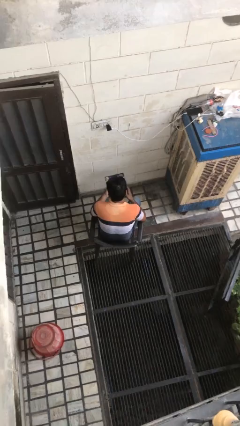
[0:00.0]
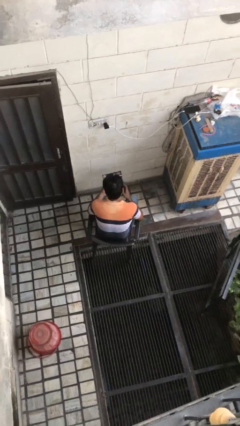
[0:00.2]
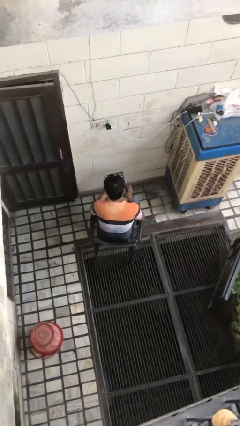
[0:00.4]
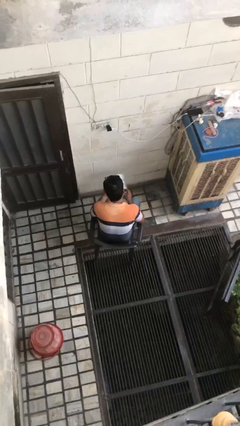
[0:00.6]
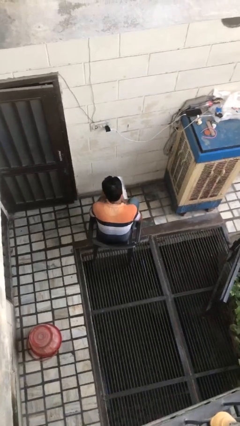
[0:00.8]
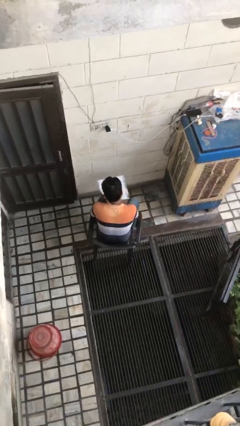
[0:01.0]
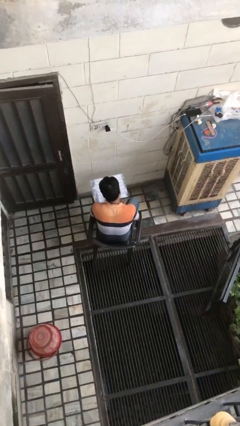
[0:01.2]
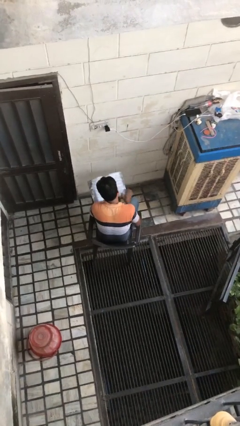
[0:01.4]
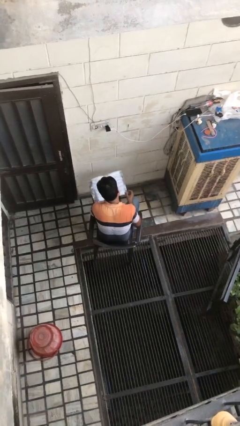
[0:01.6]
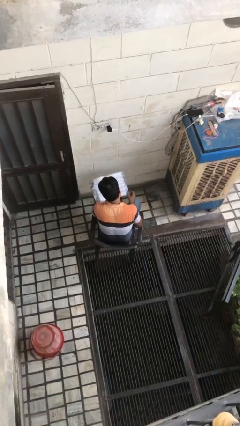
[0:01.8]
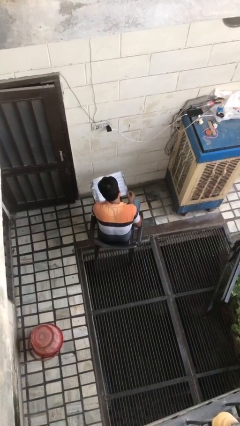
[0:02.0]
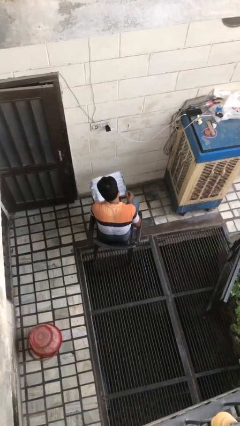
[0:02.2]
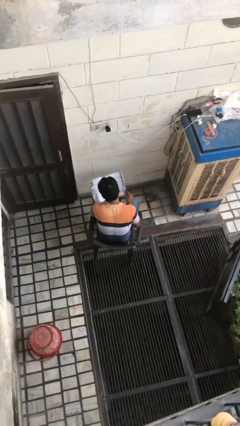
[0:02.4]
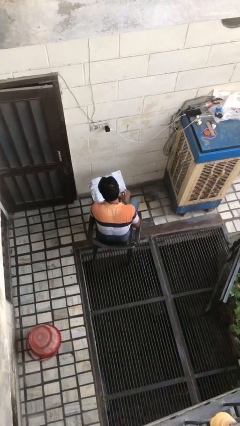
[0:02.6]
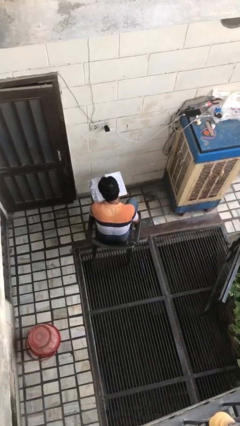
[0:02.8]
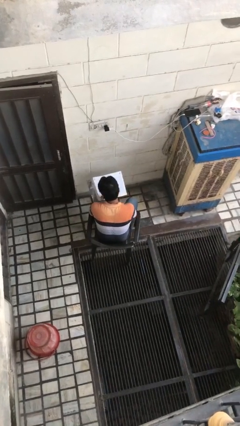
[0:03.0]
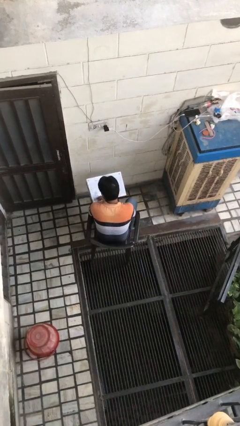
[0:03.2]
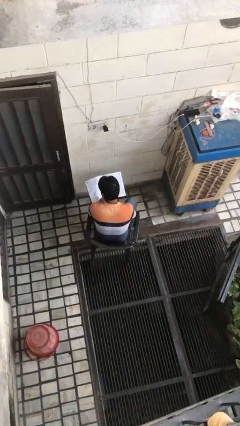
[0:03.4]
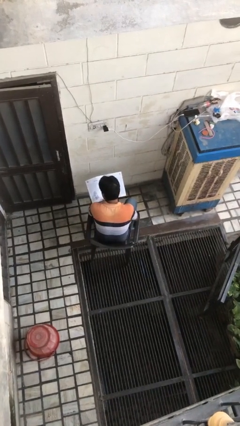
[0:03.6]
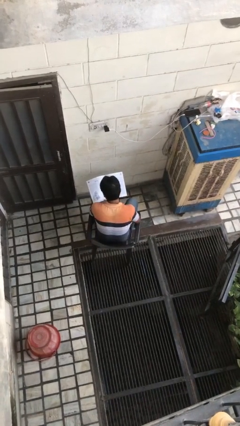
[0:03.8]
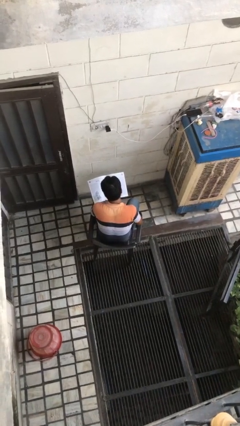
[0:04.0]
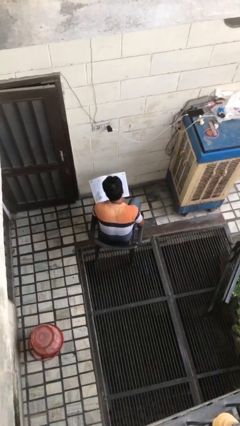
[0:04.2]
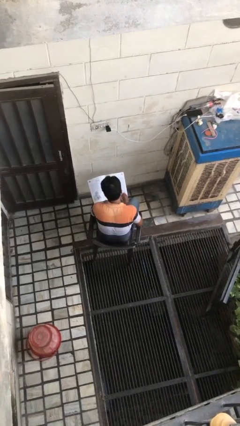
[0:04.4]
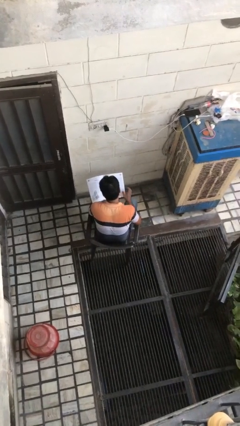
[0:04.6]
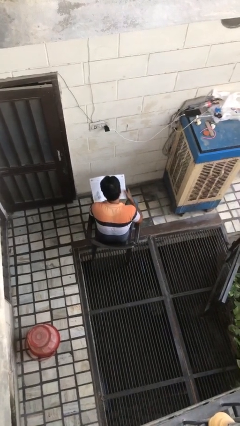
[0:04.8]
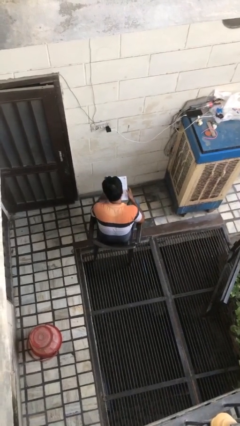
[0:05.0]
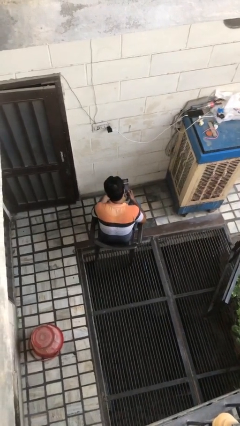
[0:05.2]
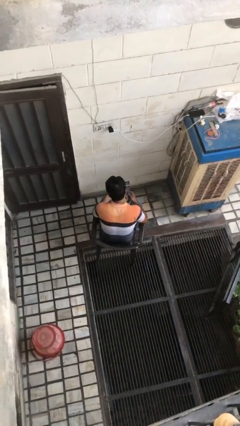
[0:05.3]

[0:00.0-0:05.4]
person reads magazine

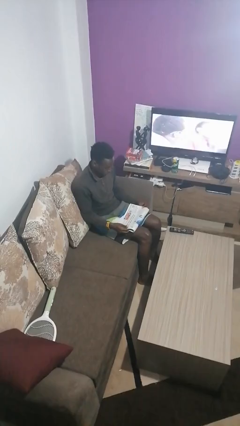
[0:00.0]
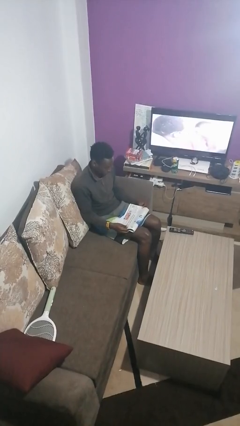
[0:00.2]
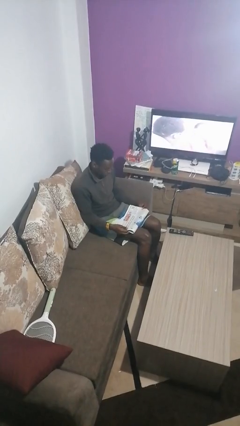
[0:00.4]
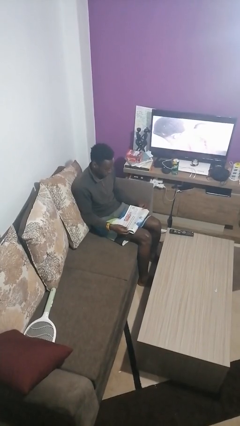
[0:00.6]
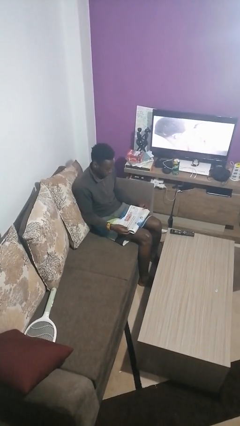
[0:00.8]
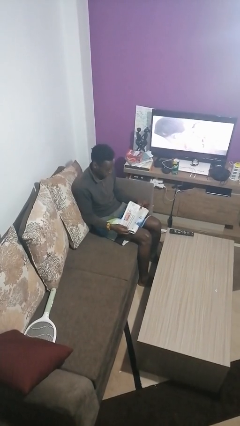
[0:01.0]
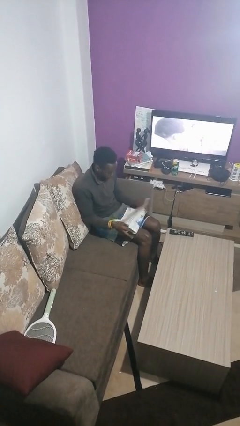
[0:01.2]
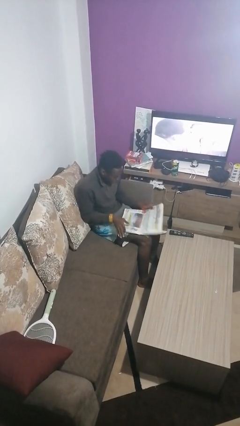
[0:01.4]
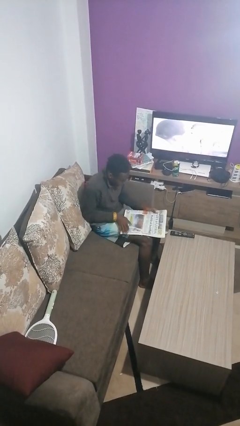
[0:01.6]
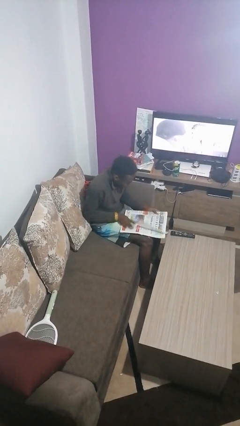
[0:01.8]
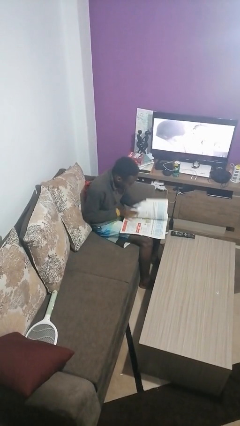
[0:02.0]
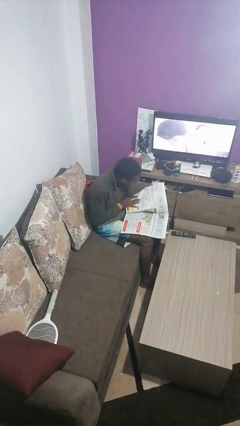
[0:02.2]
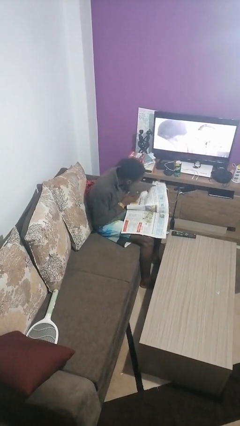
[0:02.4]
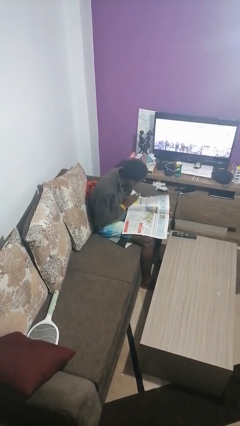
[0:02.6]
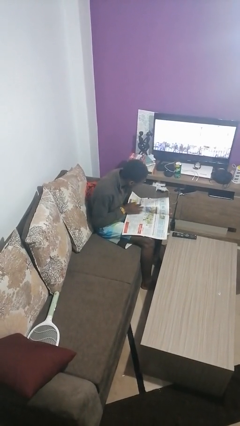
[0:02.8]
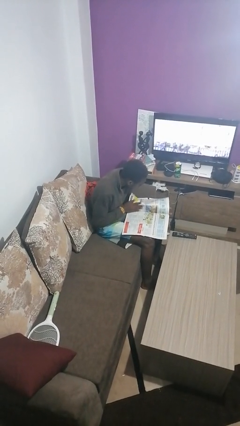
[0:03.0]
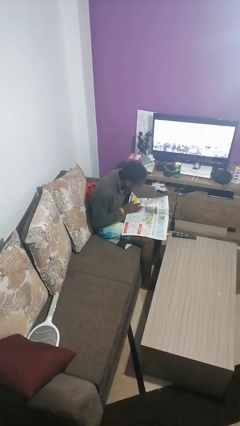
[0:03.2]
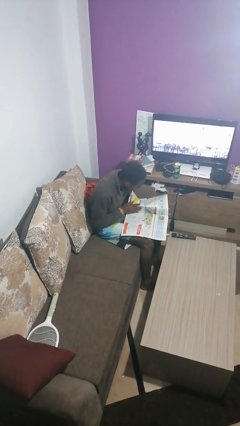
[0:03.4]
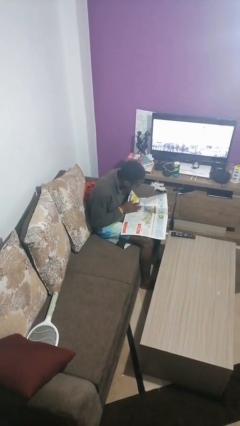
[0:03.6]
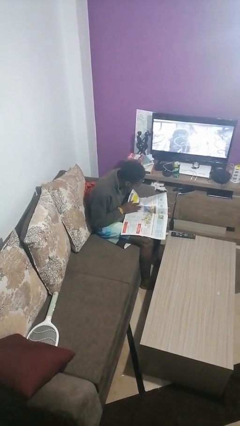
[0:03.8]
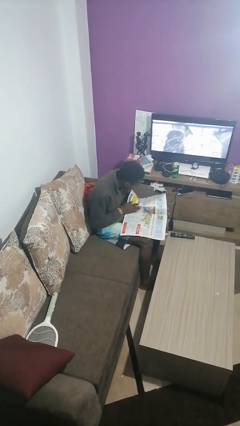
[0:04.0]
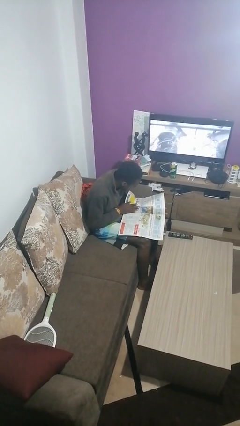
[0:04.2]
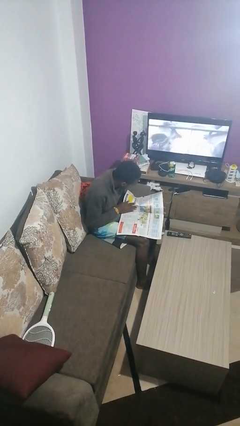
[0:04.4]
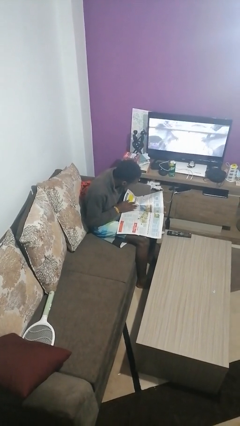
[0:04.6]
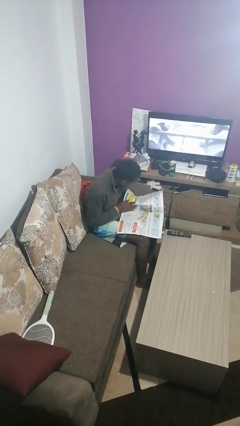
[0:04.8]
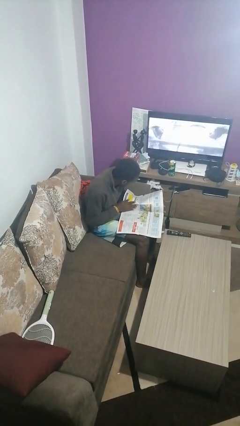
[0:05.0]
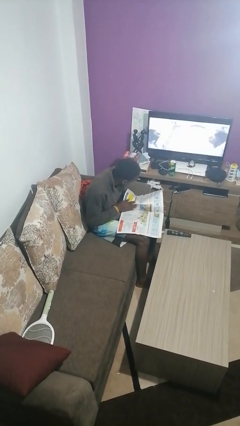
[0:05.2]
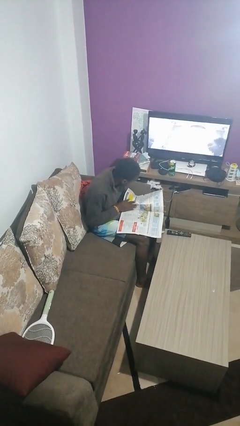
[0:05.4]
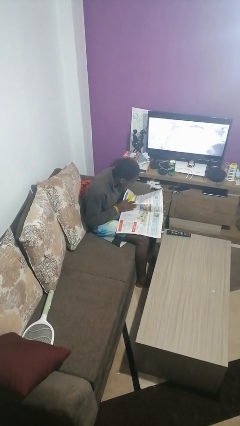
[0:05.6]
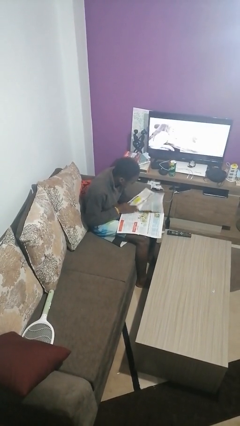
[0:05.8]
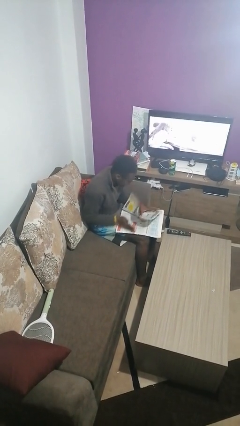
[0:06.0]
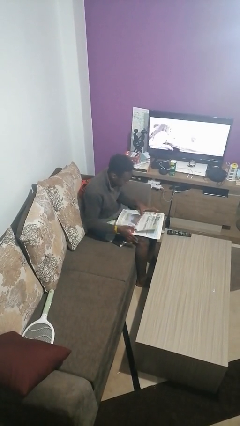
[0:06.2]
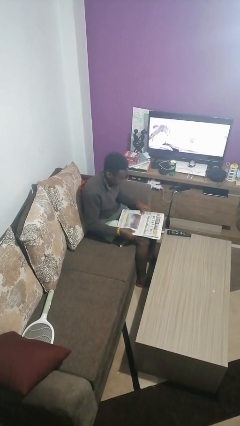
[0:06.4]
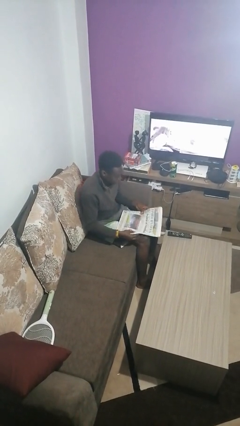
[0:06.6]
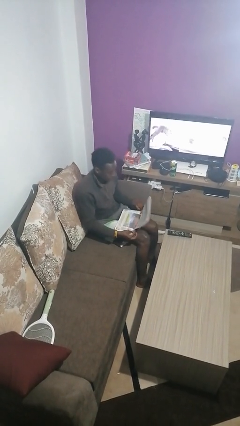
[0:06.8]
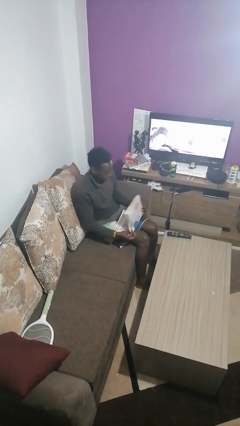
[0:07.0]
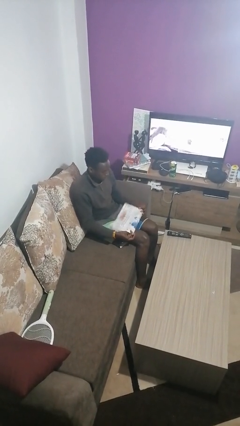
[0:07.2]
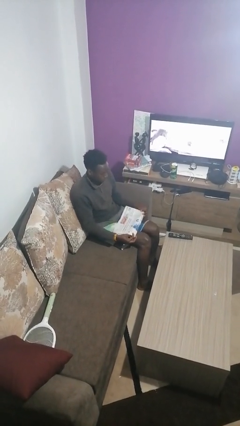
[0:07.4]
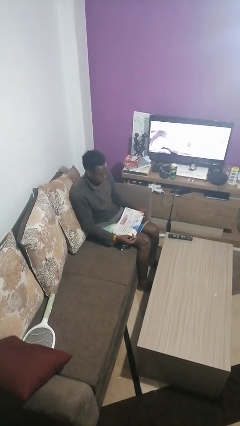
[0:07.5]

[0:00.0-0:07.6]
person reads newspaper

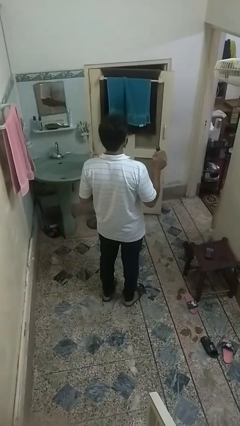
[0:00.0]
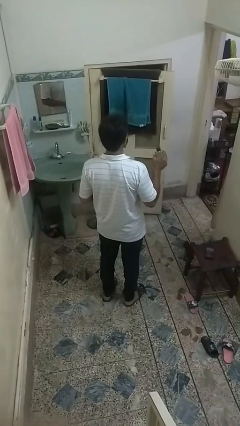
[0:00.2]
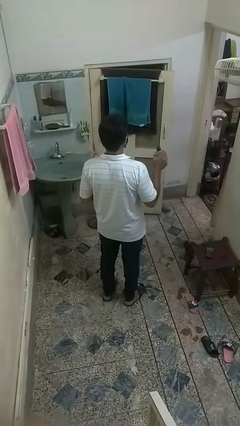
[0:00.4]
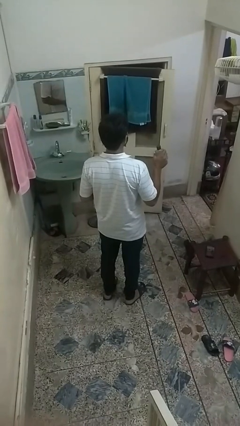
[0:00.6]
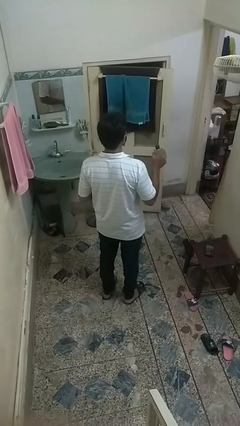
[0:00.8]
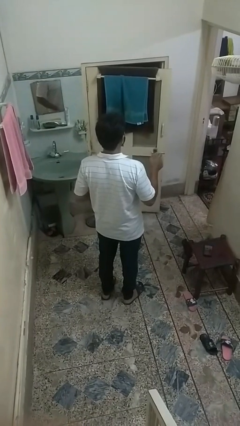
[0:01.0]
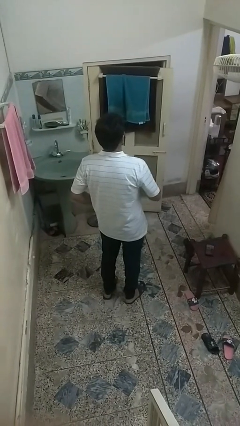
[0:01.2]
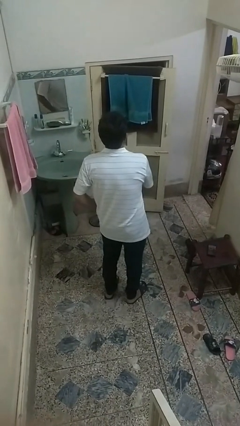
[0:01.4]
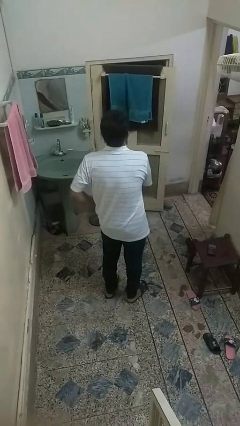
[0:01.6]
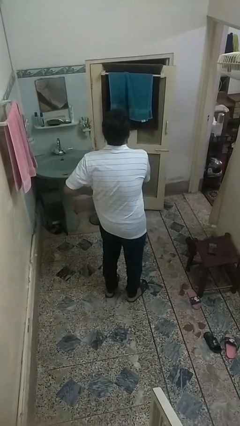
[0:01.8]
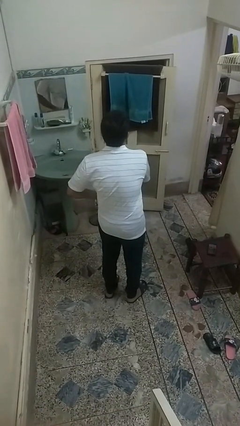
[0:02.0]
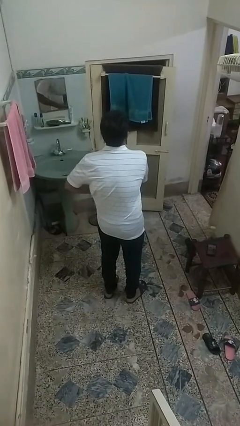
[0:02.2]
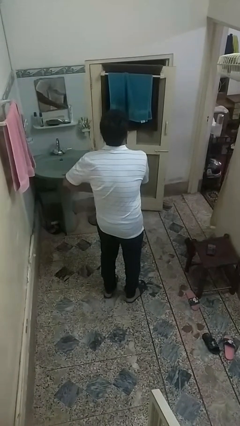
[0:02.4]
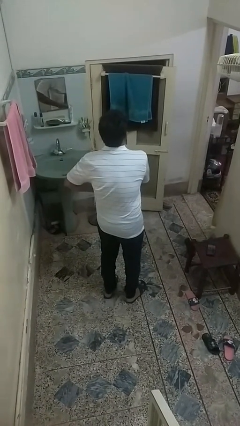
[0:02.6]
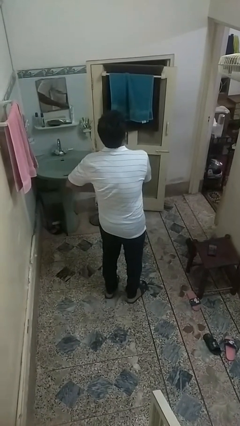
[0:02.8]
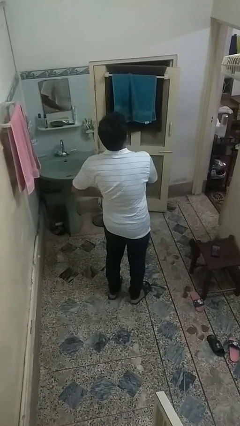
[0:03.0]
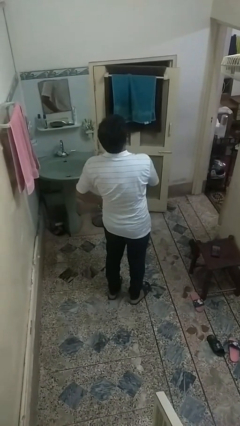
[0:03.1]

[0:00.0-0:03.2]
person applies deodorant

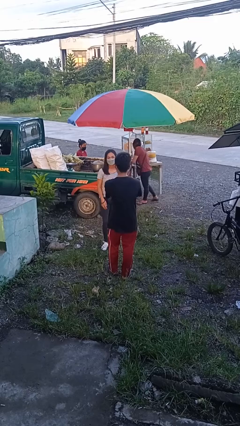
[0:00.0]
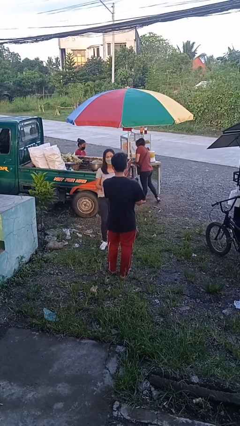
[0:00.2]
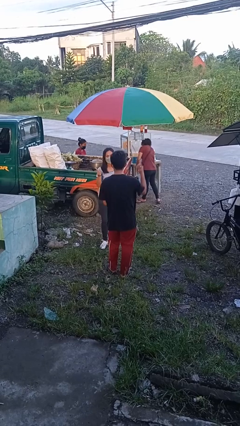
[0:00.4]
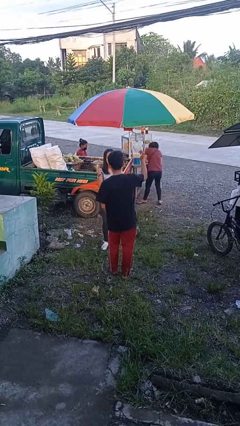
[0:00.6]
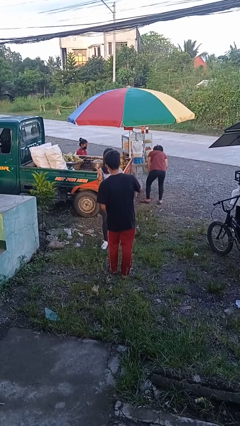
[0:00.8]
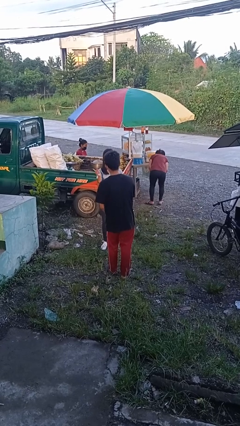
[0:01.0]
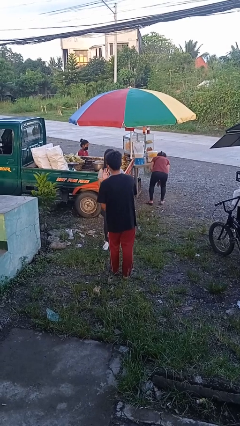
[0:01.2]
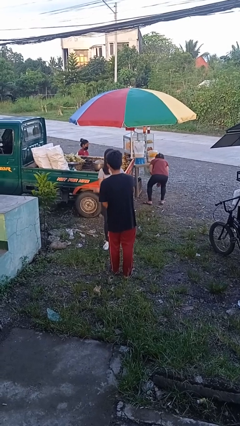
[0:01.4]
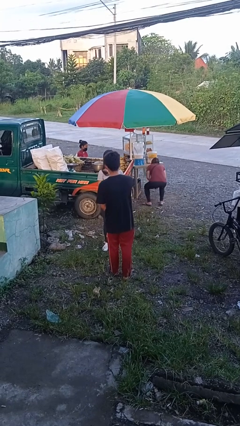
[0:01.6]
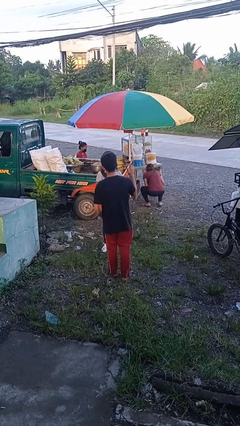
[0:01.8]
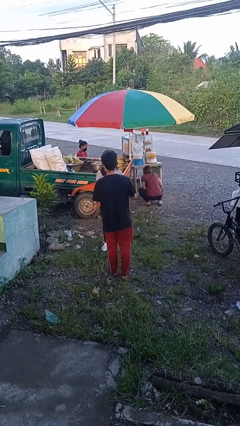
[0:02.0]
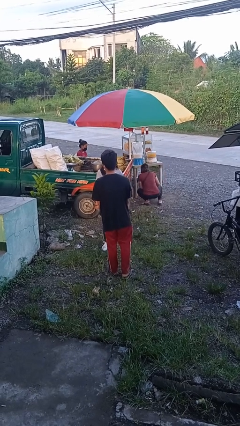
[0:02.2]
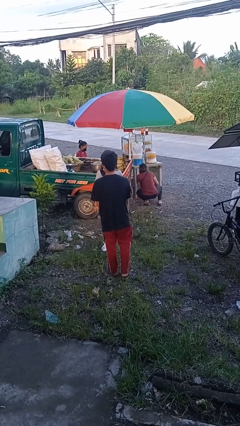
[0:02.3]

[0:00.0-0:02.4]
person talks to person
